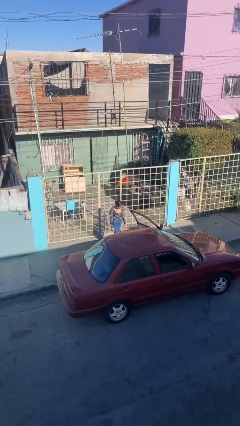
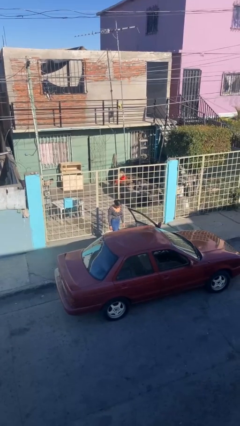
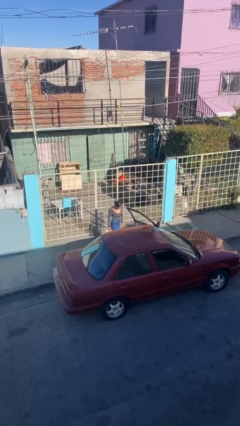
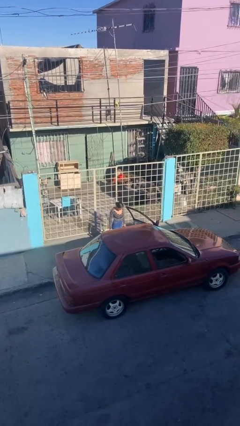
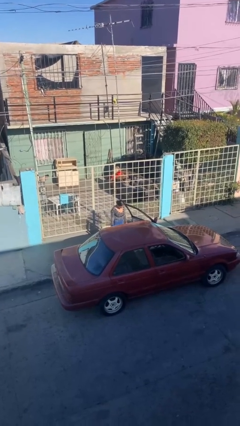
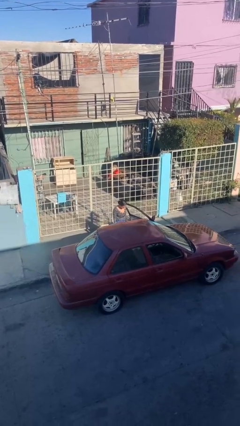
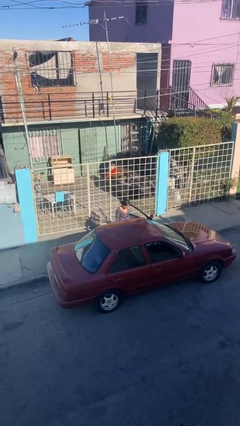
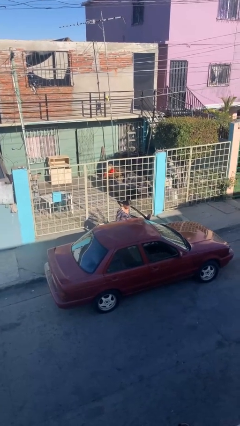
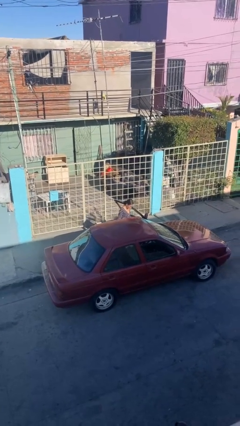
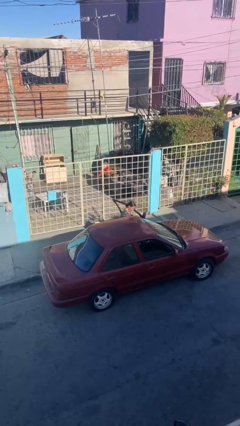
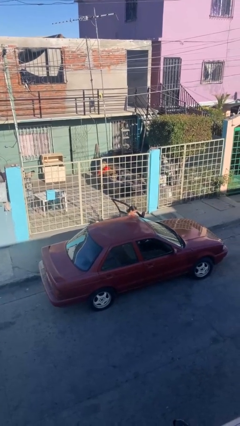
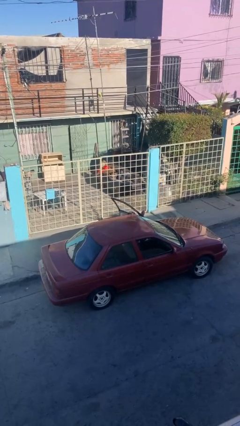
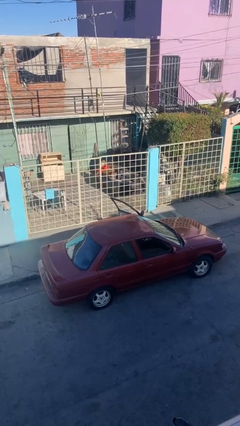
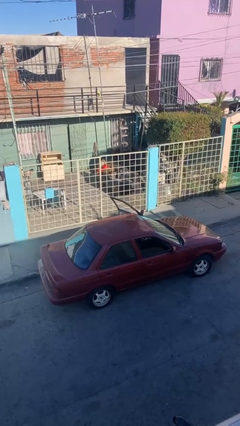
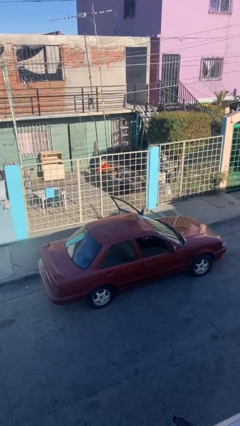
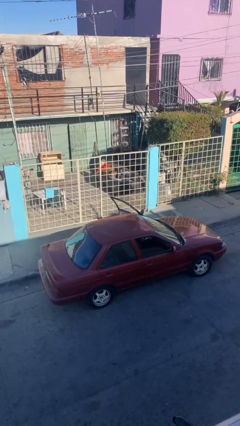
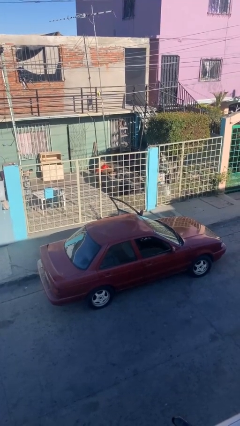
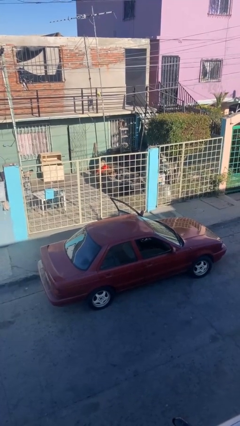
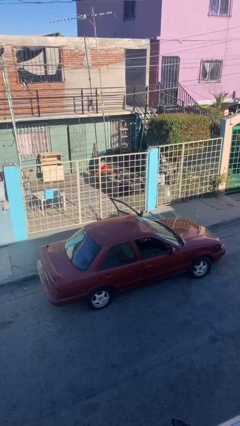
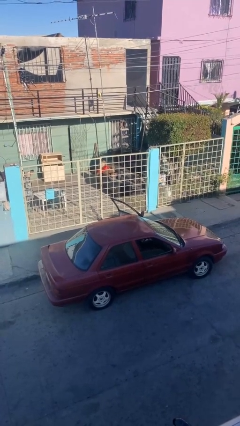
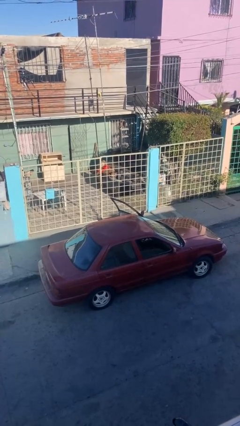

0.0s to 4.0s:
person enters car

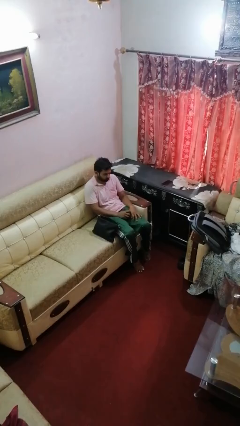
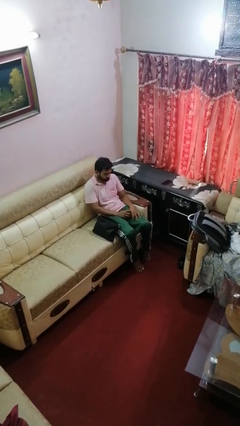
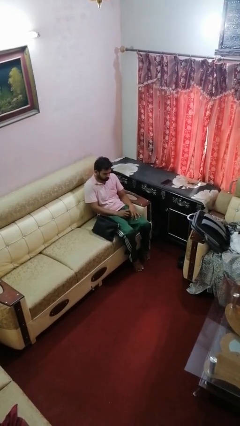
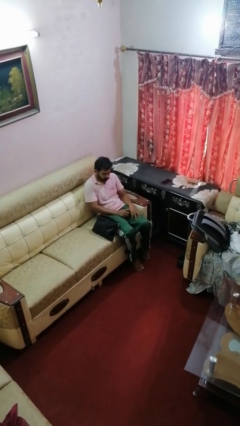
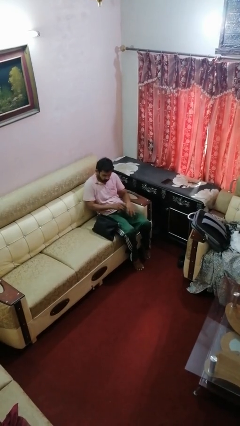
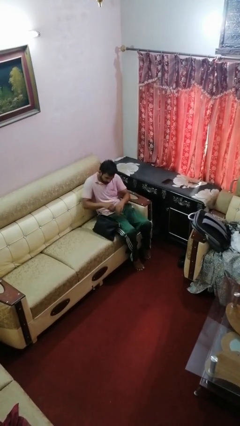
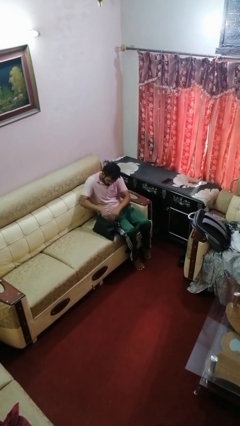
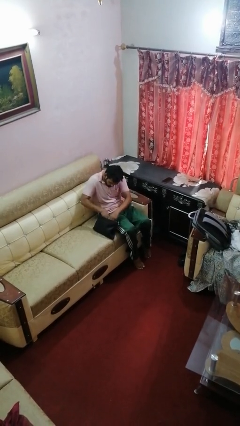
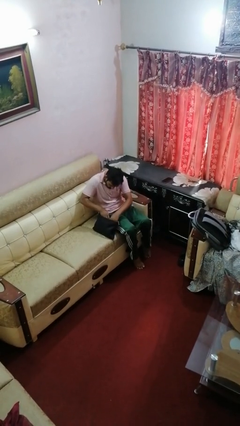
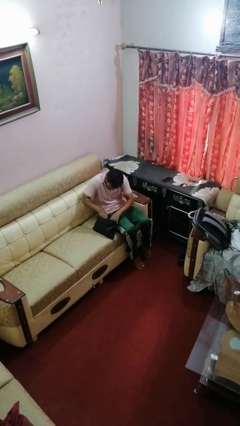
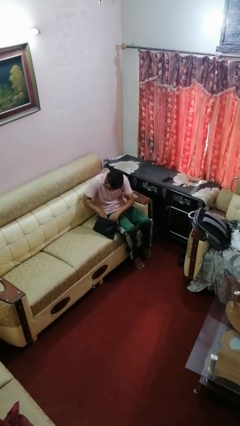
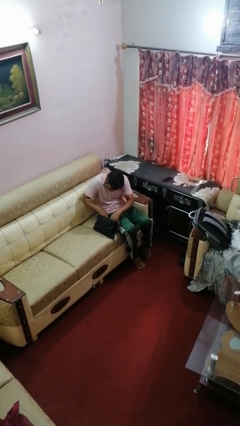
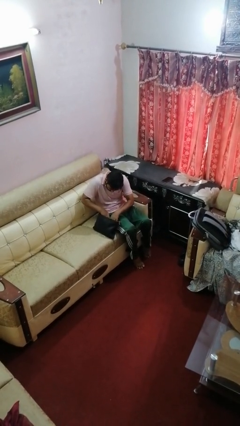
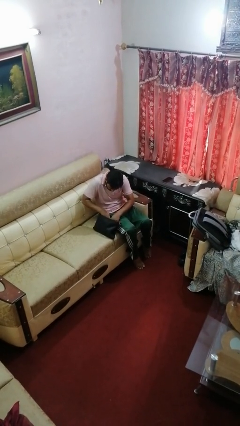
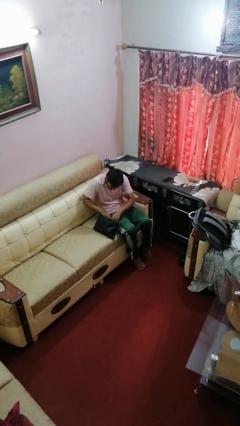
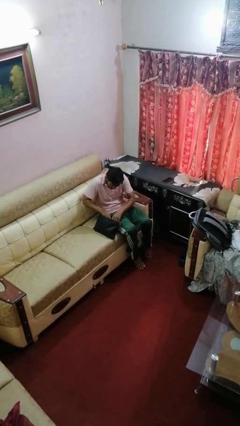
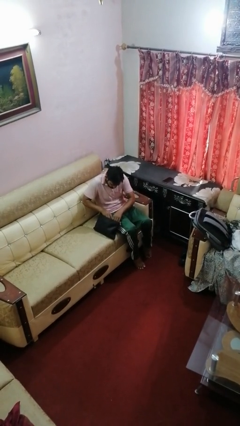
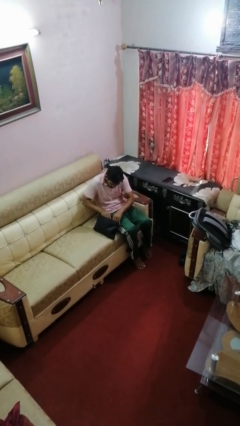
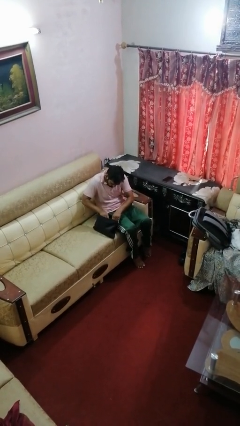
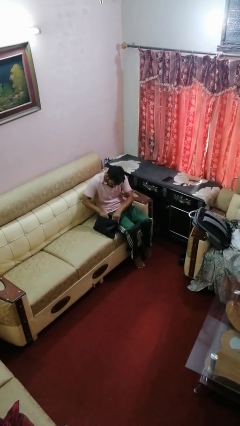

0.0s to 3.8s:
person searches in purse

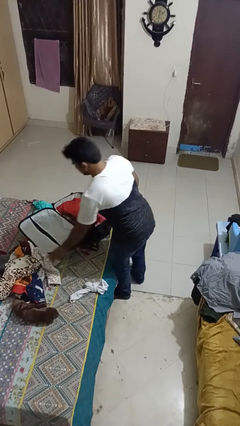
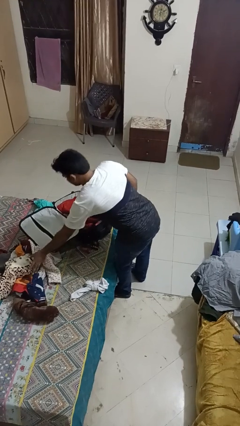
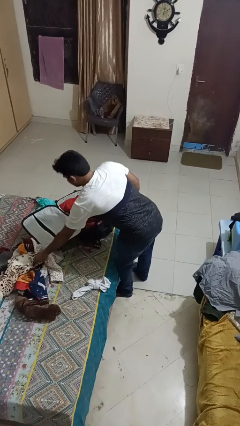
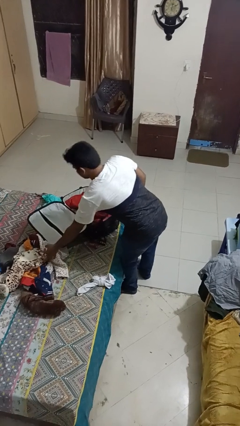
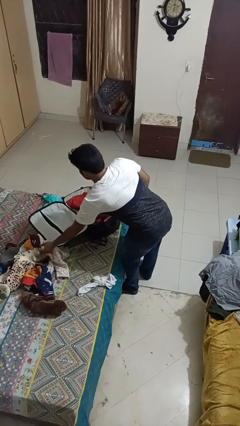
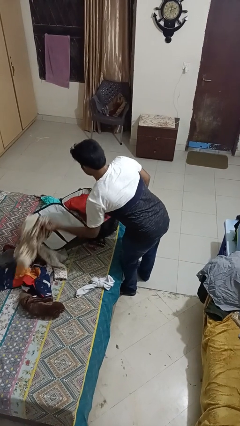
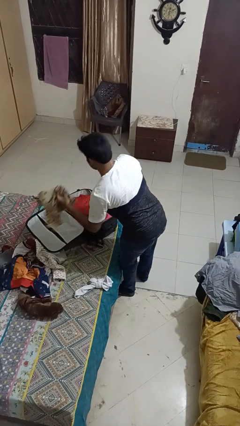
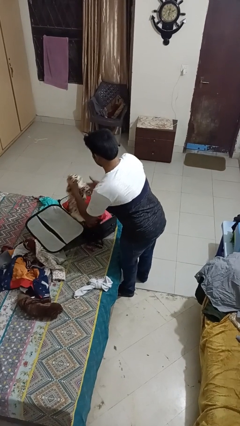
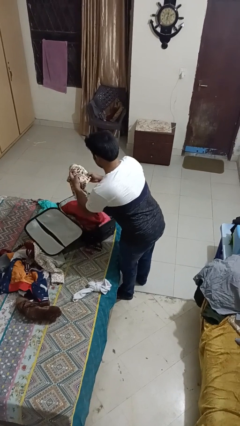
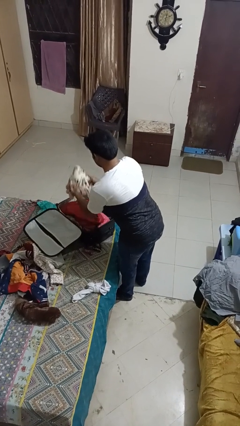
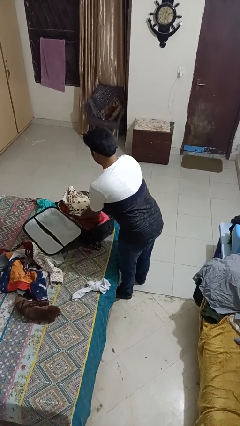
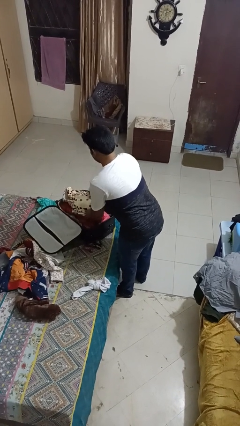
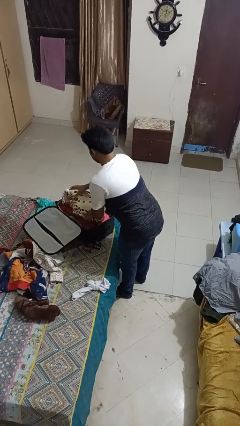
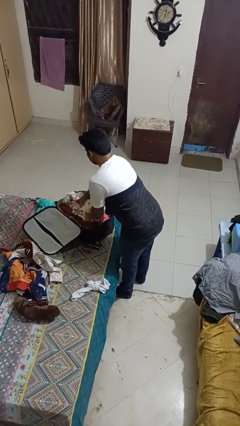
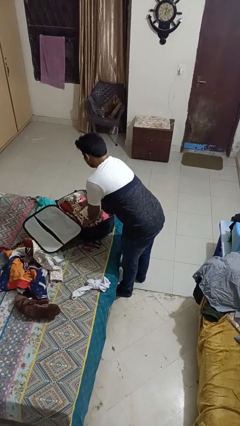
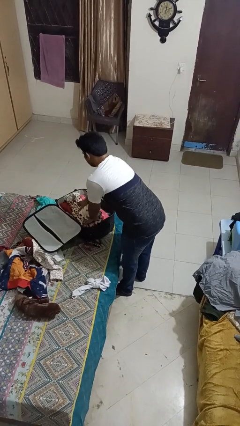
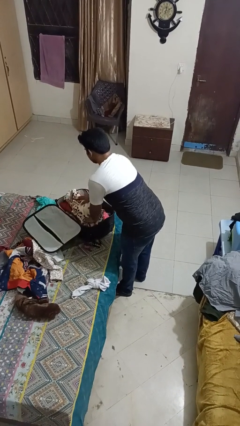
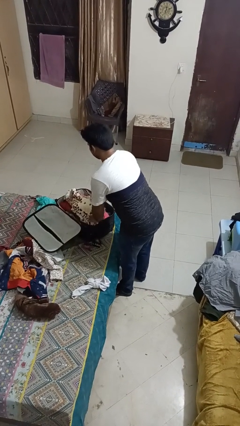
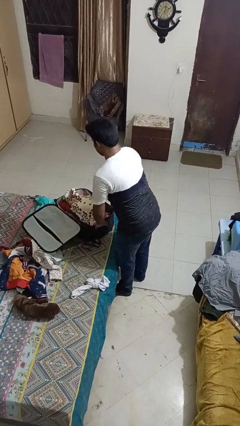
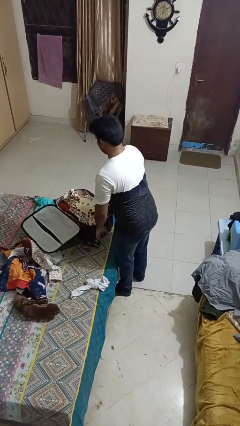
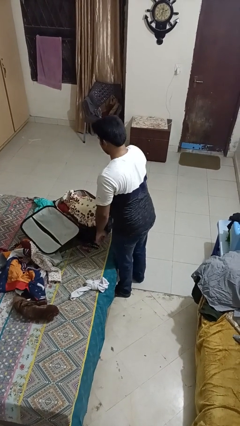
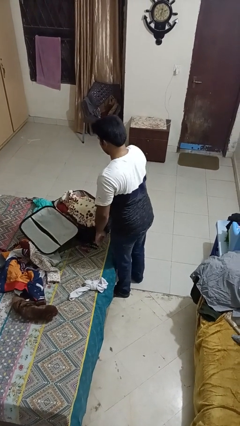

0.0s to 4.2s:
person loads clothes into suitcase

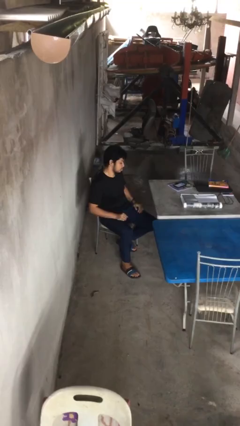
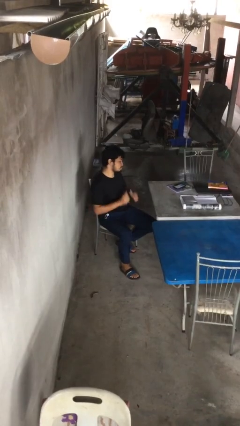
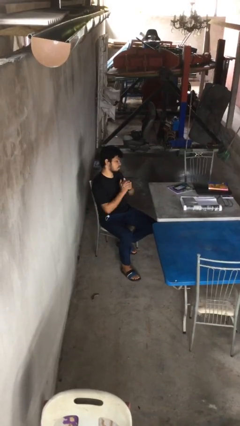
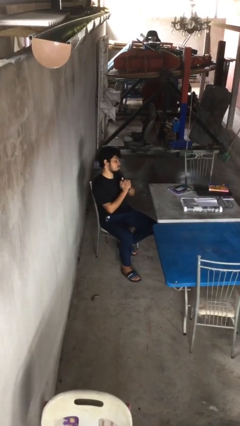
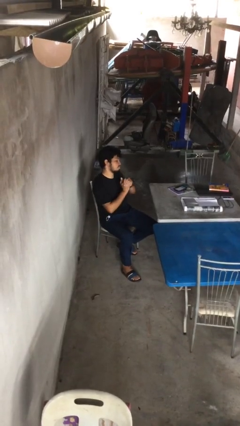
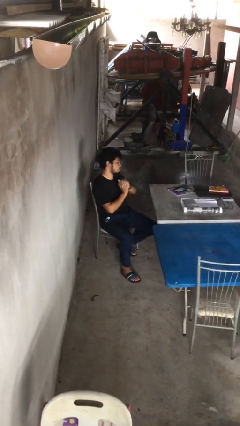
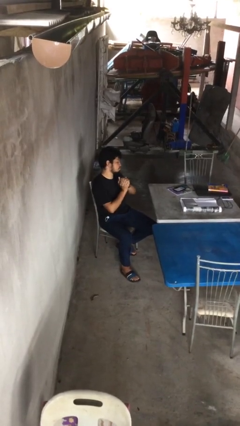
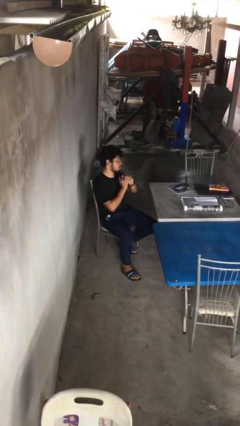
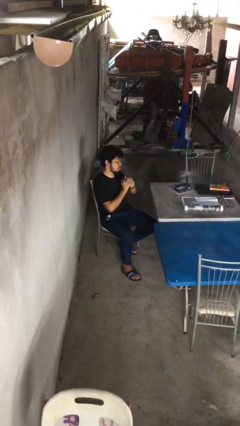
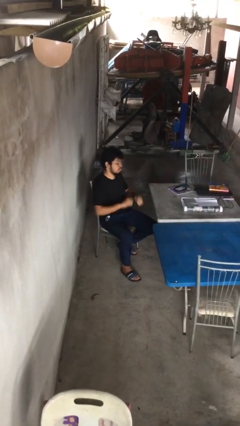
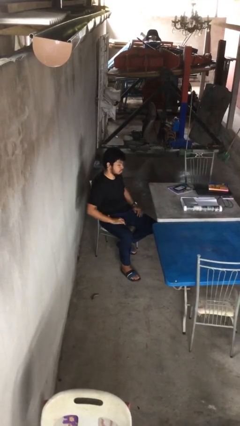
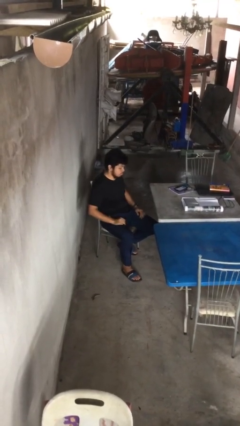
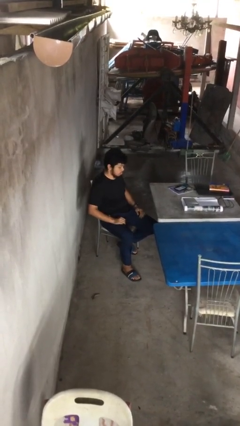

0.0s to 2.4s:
person cracks knuckles

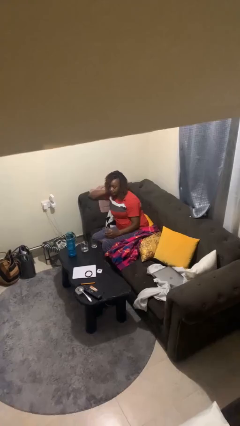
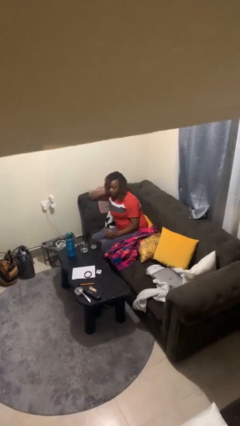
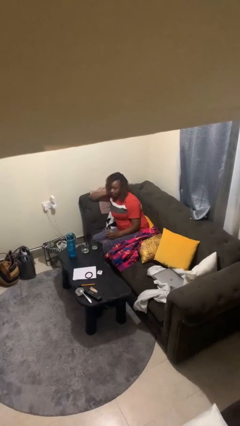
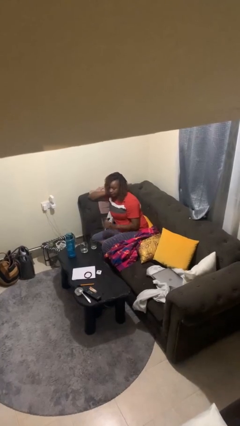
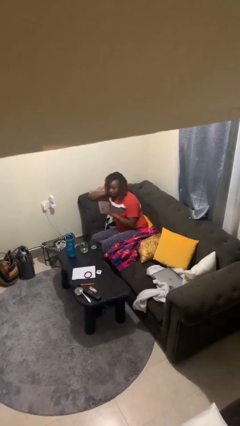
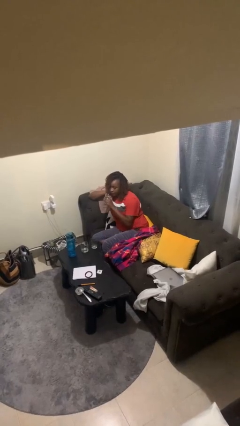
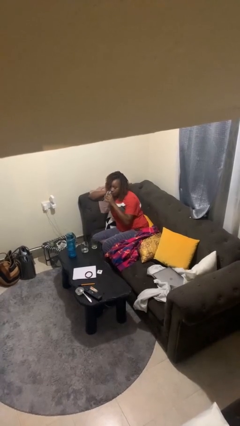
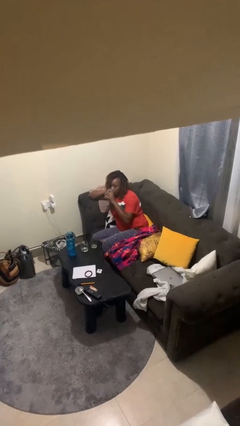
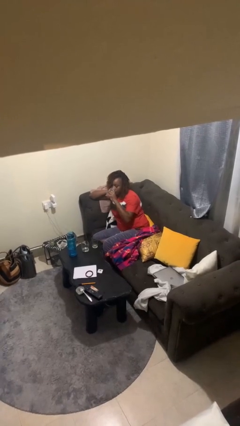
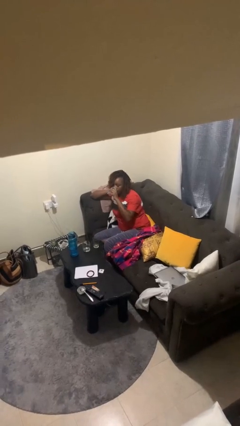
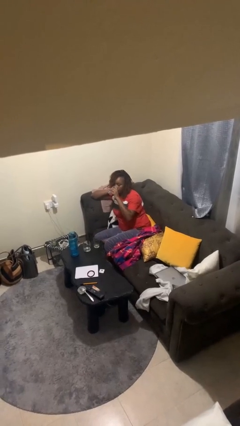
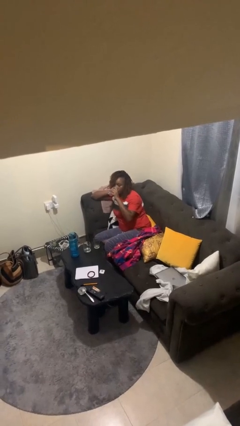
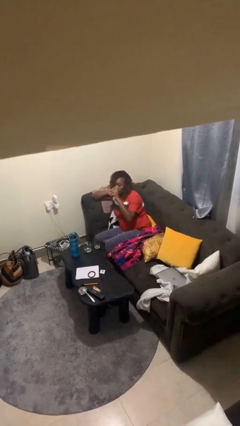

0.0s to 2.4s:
person drinks from shotglass

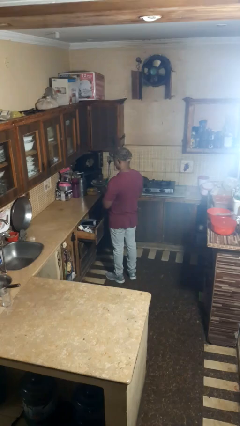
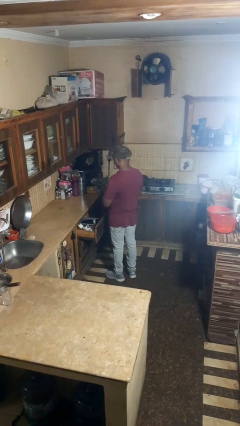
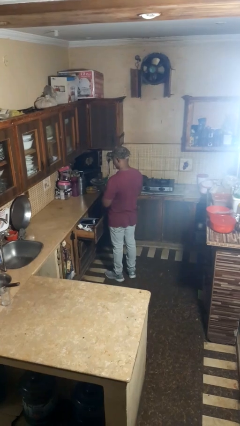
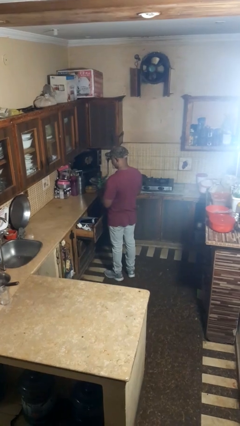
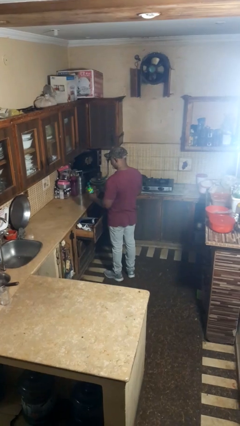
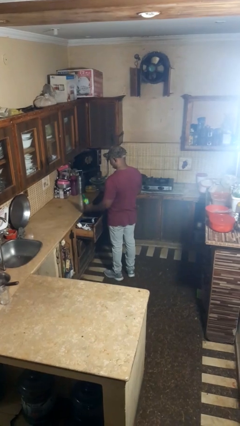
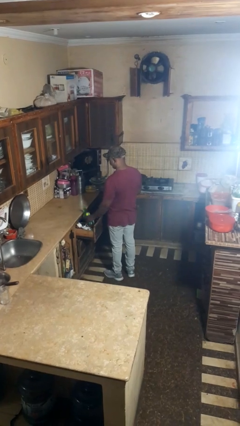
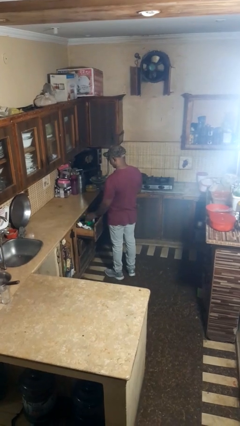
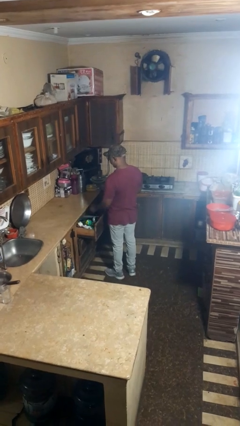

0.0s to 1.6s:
person puts object into kitchen drawer
